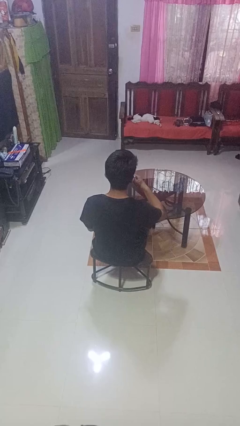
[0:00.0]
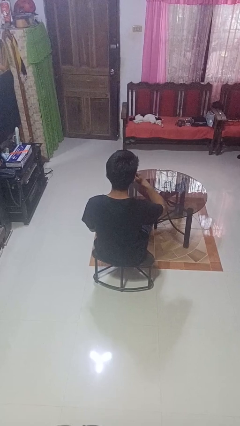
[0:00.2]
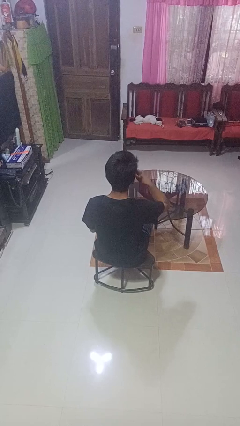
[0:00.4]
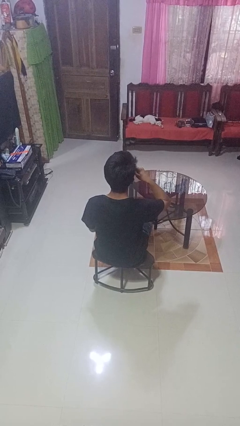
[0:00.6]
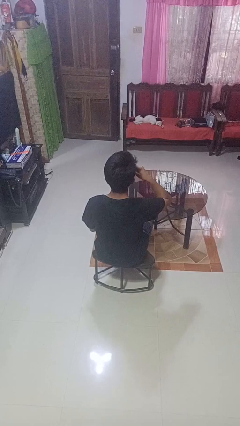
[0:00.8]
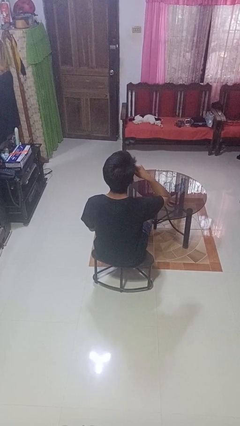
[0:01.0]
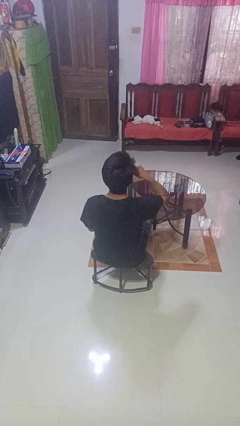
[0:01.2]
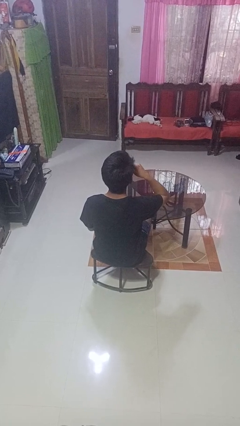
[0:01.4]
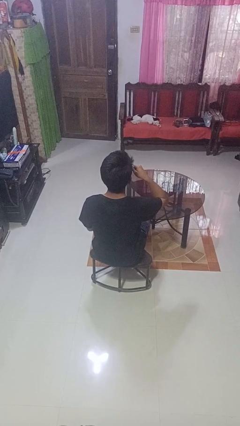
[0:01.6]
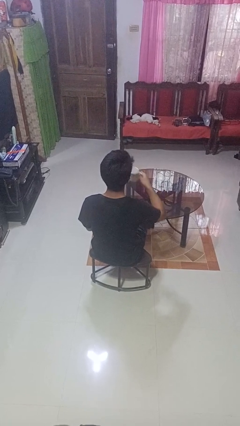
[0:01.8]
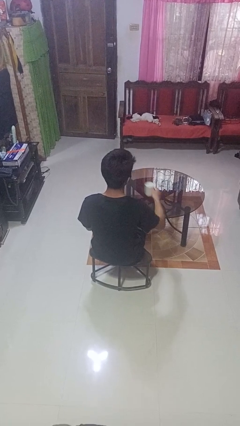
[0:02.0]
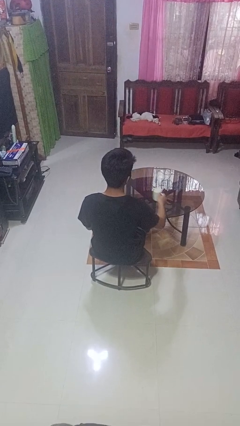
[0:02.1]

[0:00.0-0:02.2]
person drinks from mug

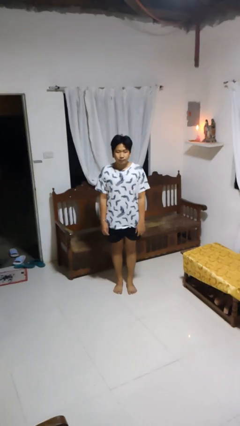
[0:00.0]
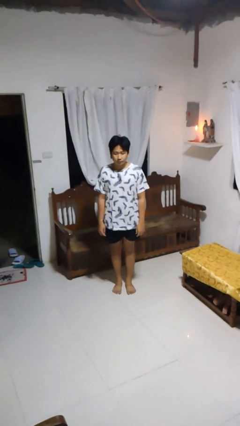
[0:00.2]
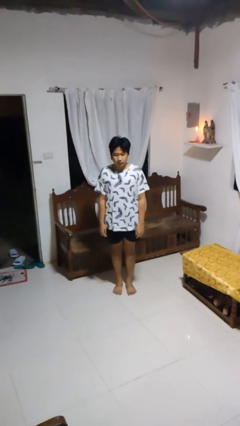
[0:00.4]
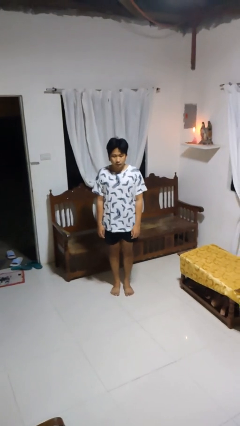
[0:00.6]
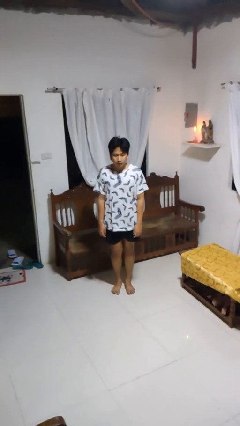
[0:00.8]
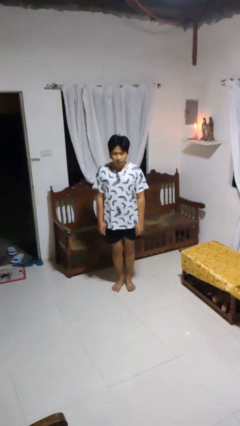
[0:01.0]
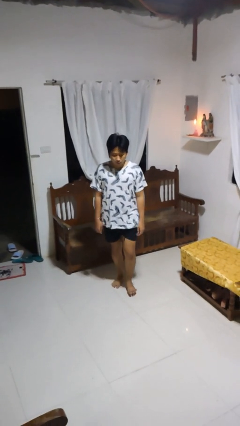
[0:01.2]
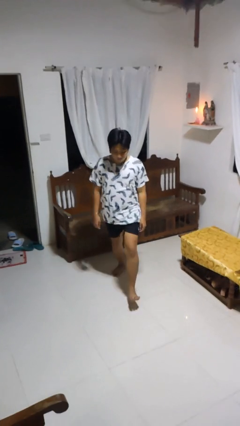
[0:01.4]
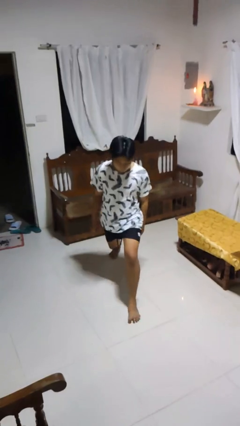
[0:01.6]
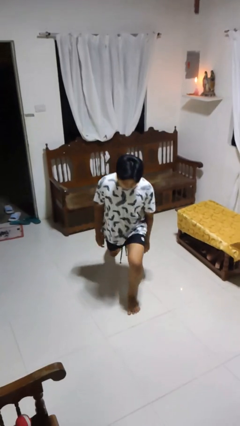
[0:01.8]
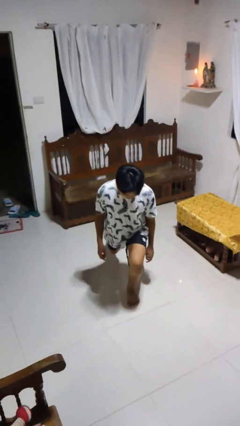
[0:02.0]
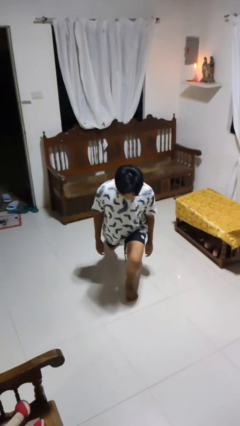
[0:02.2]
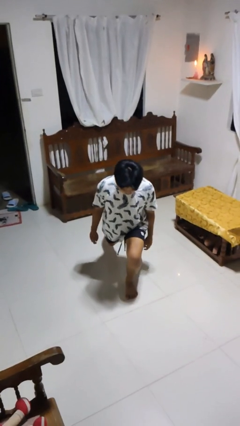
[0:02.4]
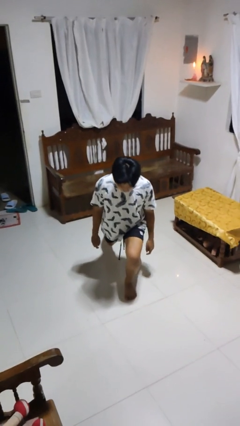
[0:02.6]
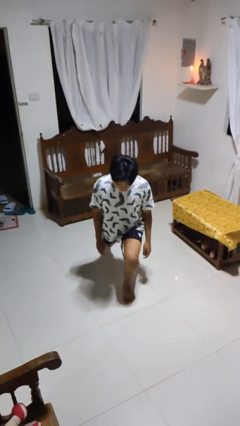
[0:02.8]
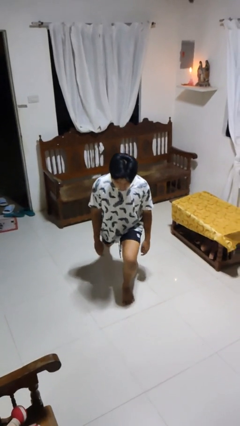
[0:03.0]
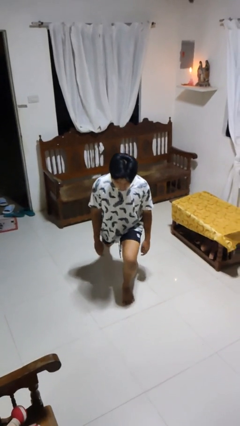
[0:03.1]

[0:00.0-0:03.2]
person exercises with lunges

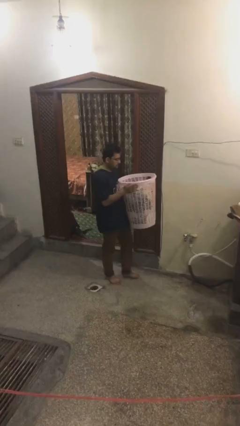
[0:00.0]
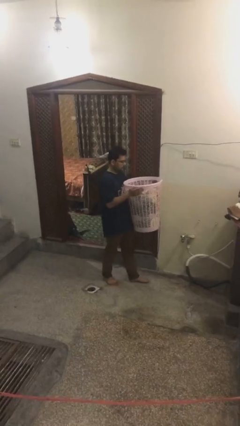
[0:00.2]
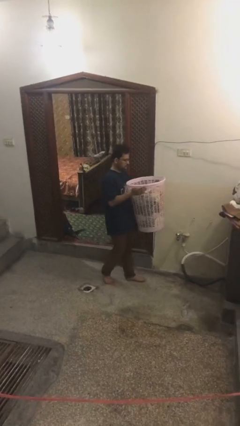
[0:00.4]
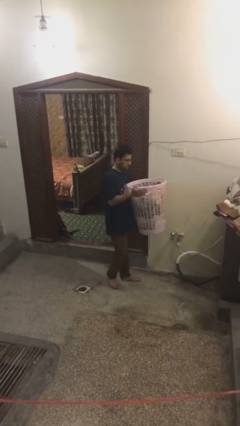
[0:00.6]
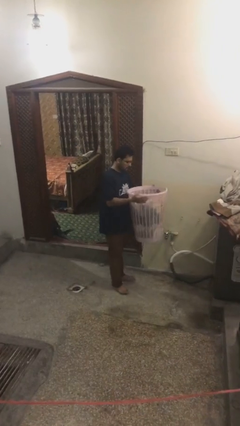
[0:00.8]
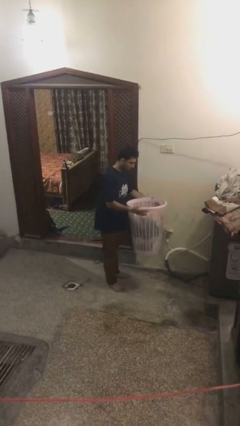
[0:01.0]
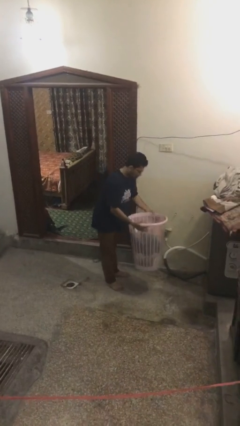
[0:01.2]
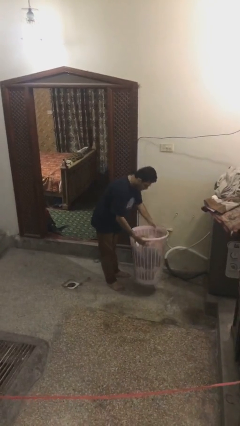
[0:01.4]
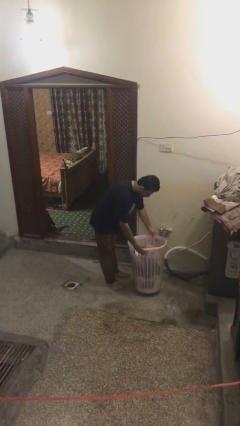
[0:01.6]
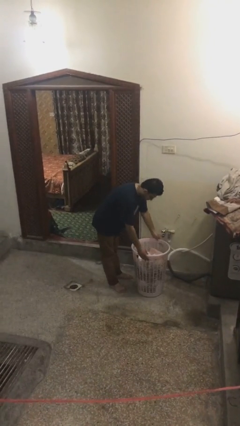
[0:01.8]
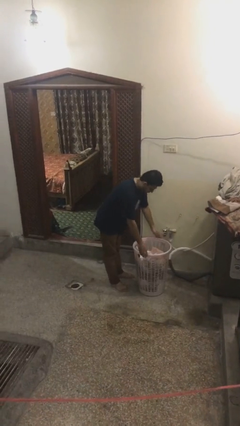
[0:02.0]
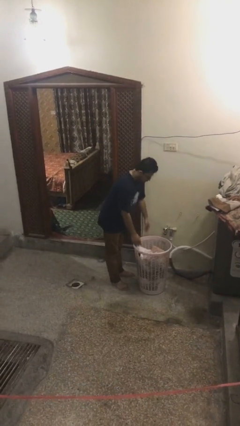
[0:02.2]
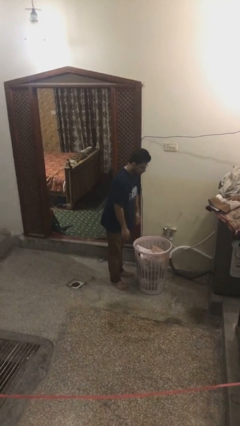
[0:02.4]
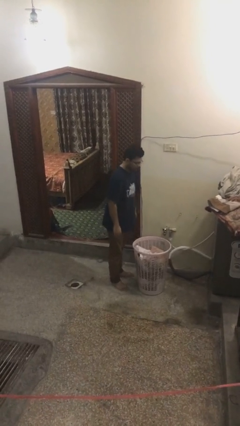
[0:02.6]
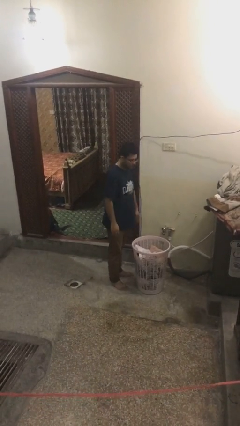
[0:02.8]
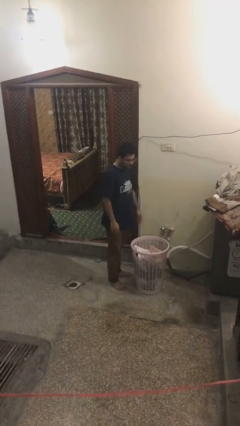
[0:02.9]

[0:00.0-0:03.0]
person puts down object on floor

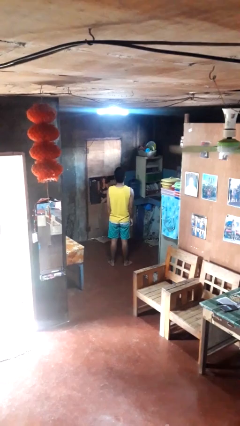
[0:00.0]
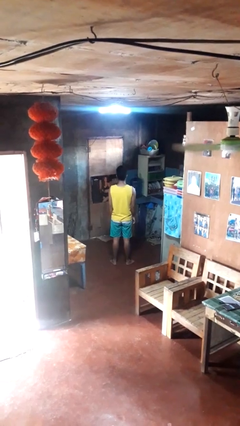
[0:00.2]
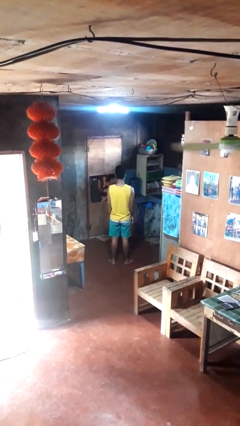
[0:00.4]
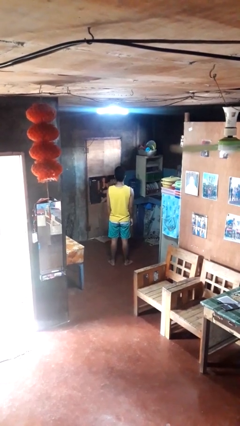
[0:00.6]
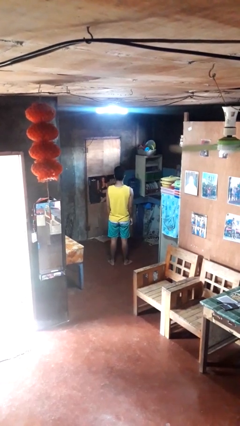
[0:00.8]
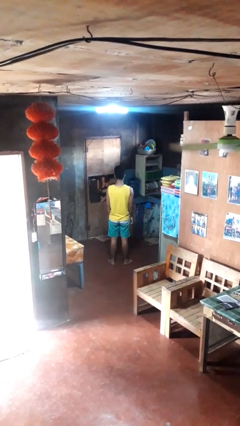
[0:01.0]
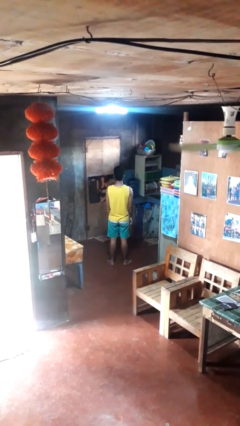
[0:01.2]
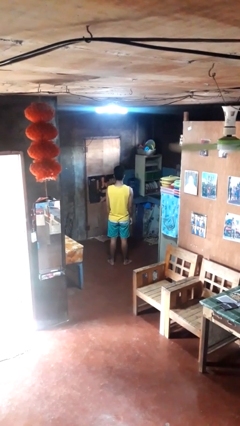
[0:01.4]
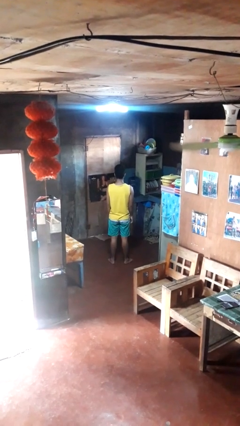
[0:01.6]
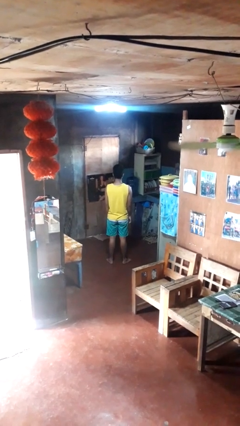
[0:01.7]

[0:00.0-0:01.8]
person nods head

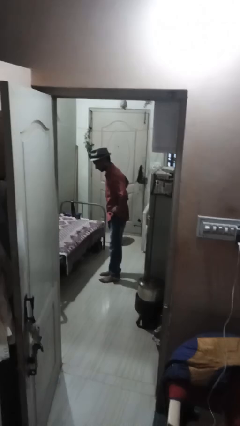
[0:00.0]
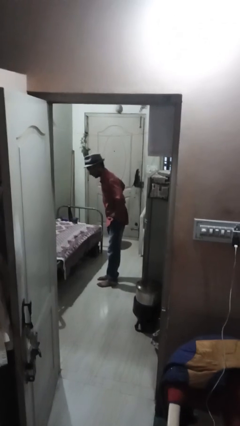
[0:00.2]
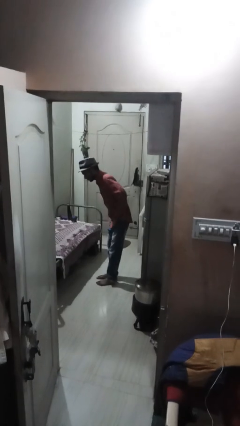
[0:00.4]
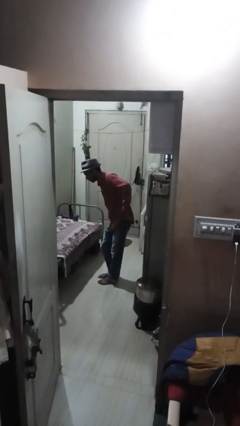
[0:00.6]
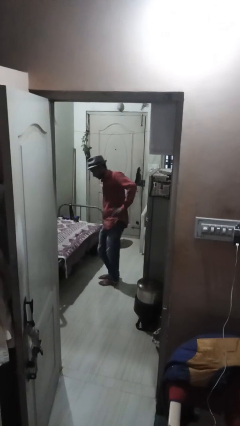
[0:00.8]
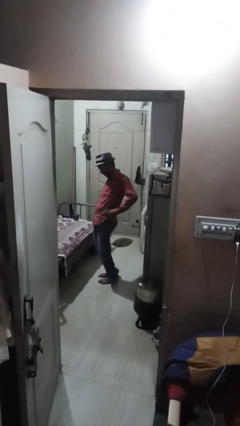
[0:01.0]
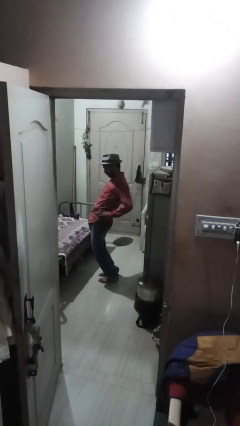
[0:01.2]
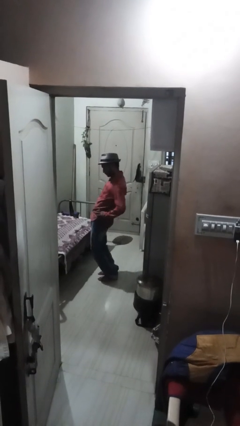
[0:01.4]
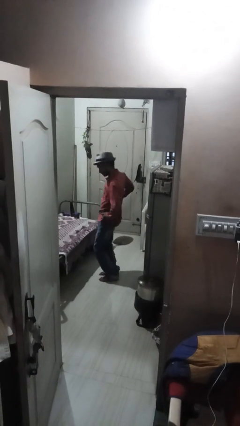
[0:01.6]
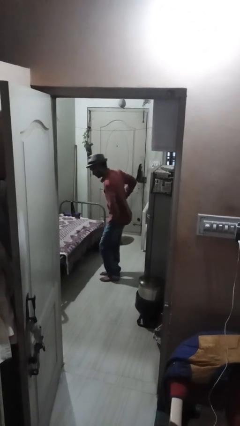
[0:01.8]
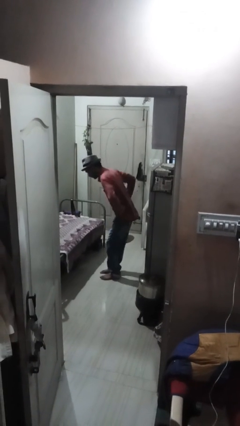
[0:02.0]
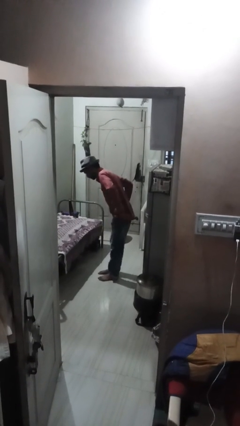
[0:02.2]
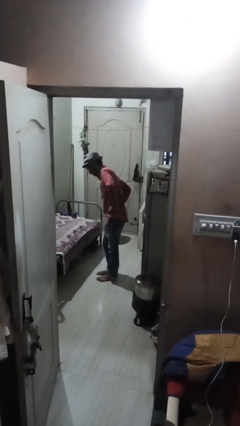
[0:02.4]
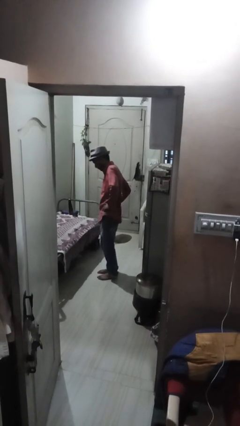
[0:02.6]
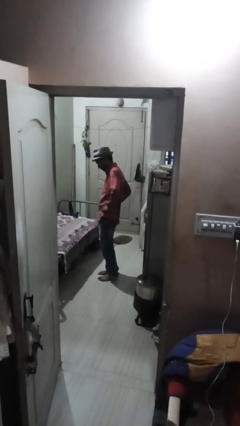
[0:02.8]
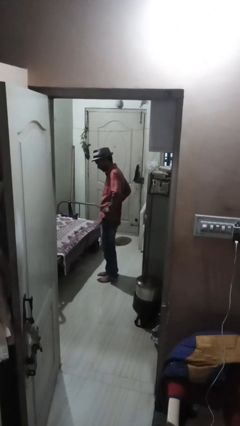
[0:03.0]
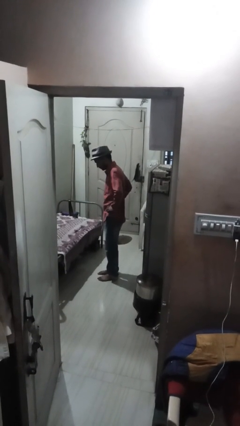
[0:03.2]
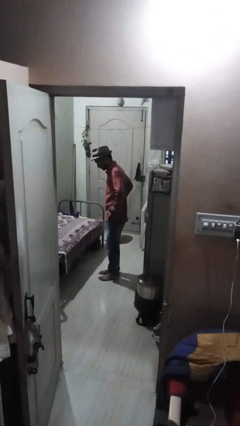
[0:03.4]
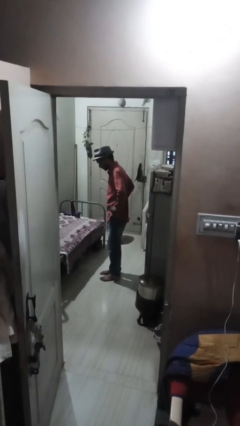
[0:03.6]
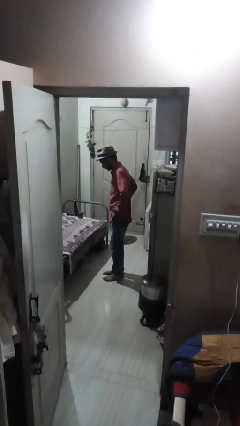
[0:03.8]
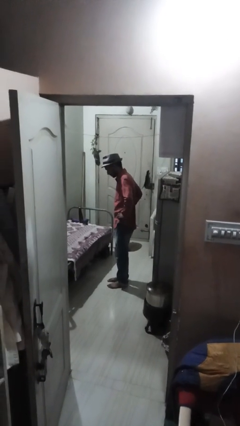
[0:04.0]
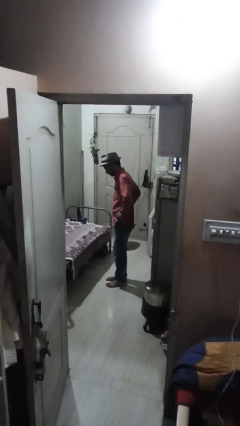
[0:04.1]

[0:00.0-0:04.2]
person wiggles hips

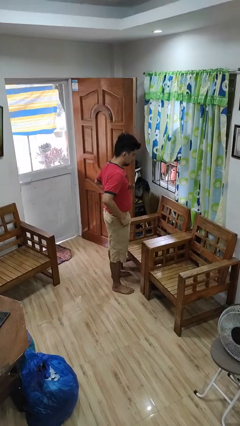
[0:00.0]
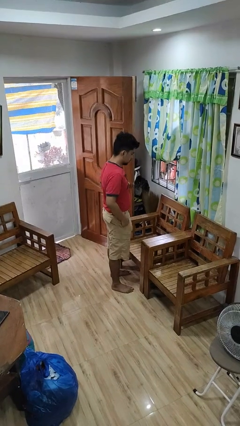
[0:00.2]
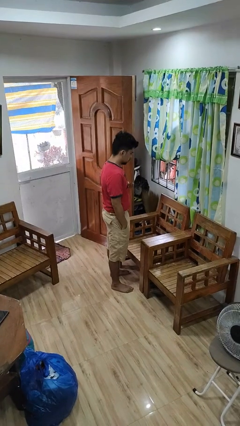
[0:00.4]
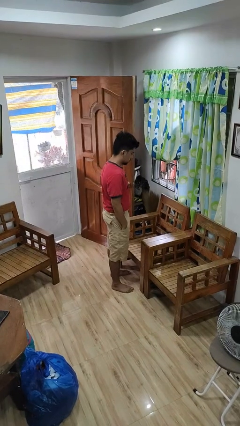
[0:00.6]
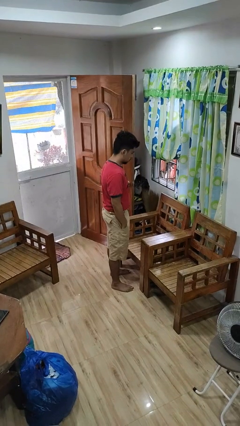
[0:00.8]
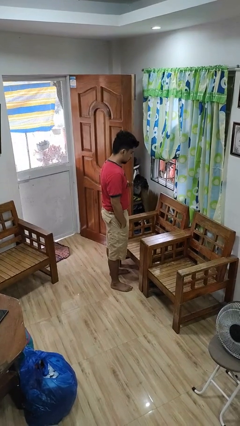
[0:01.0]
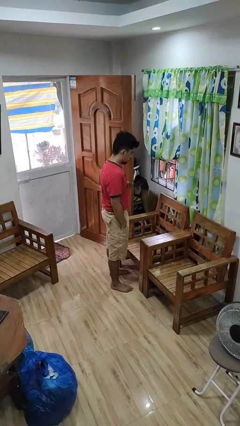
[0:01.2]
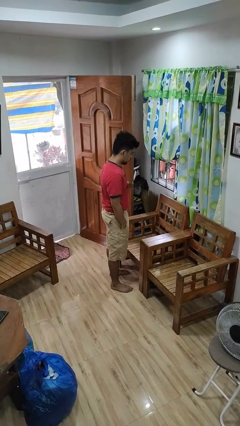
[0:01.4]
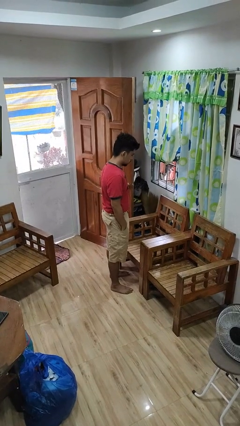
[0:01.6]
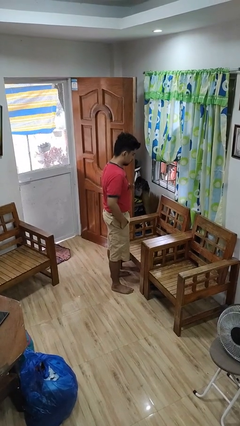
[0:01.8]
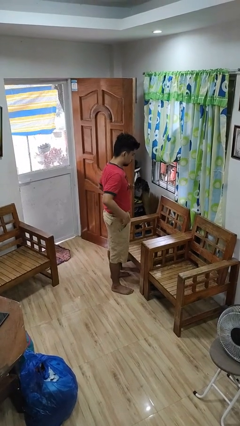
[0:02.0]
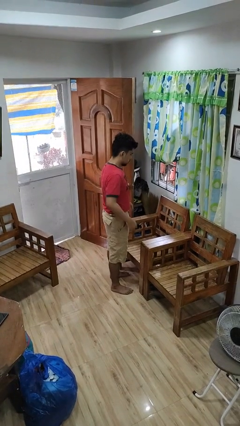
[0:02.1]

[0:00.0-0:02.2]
person puts hands in back pockets

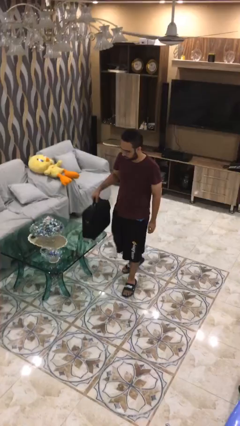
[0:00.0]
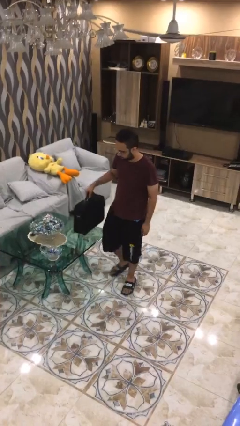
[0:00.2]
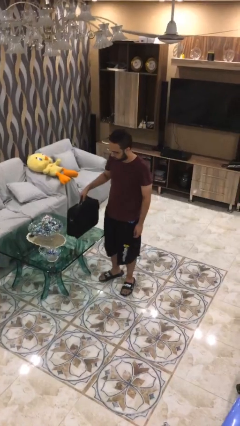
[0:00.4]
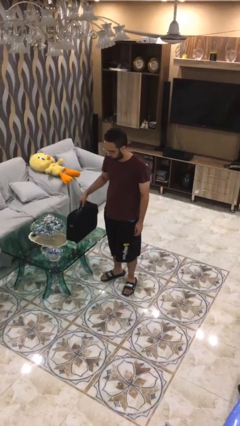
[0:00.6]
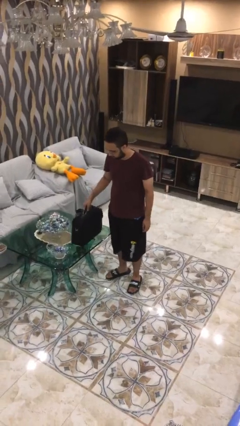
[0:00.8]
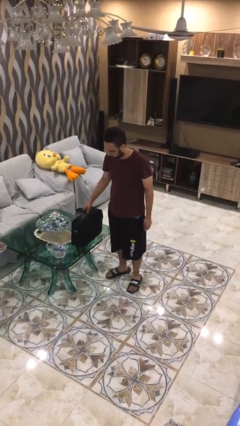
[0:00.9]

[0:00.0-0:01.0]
person puts down object on table
